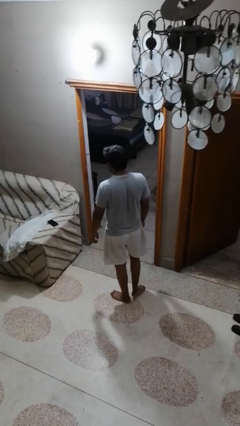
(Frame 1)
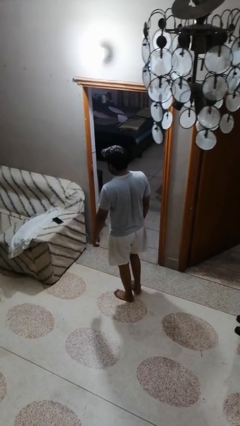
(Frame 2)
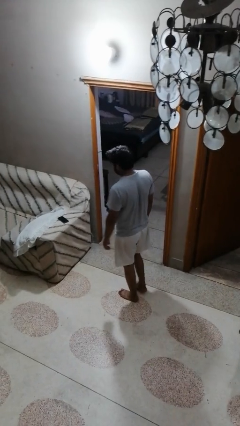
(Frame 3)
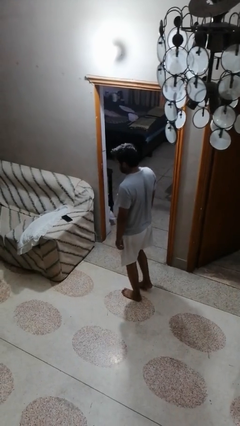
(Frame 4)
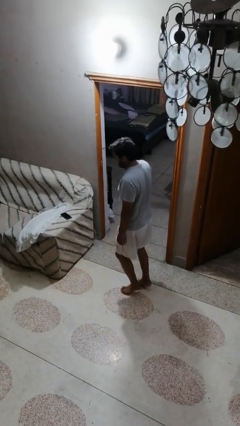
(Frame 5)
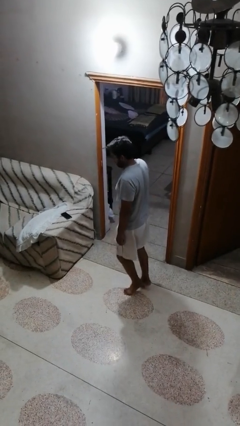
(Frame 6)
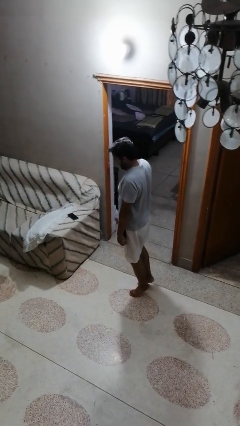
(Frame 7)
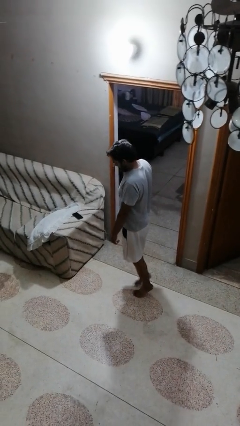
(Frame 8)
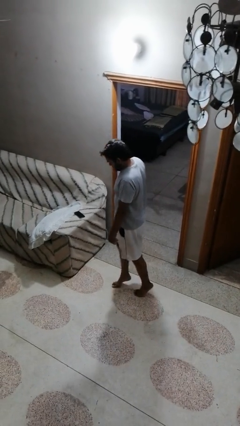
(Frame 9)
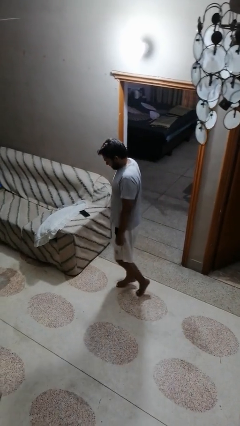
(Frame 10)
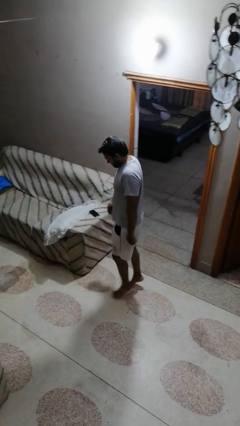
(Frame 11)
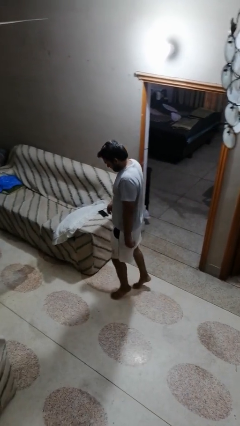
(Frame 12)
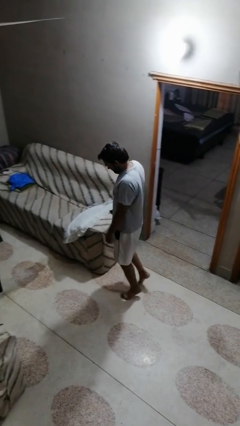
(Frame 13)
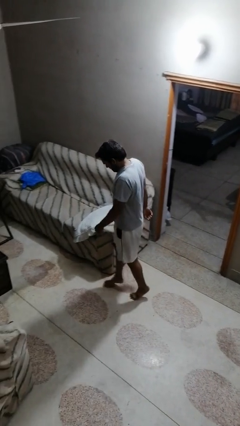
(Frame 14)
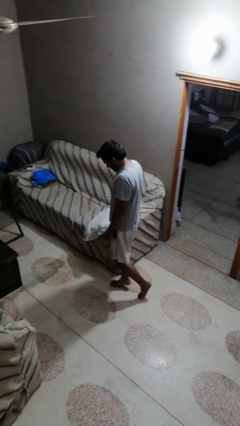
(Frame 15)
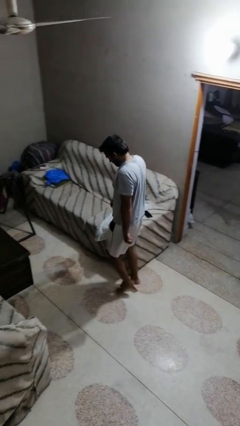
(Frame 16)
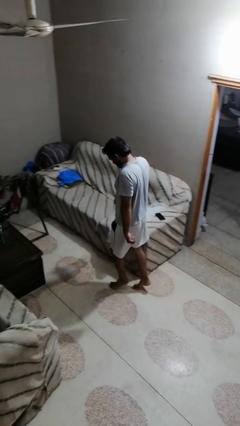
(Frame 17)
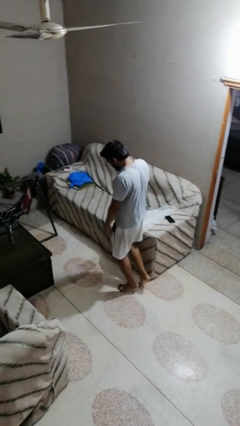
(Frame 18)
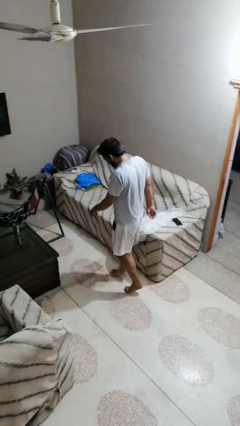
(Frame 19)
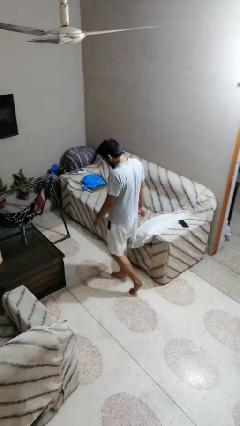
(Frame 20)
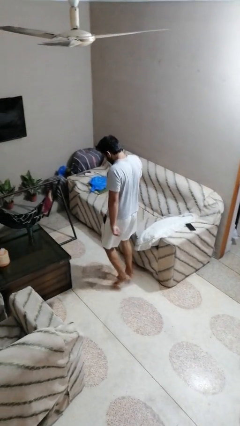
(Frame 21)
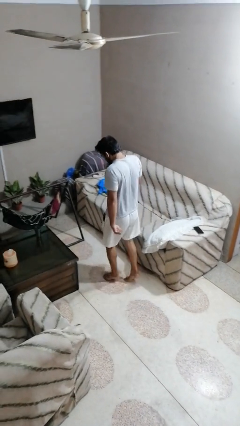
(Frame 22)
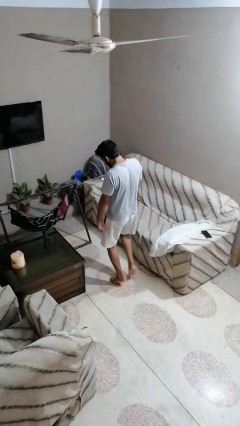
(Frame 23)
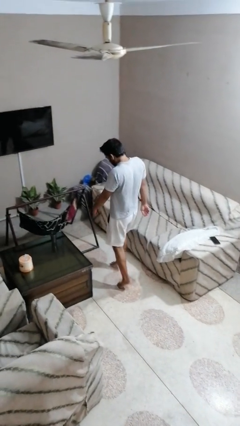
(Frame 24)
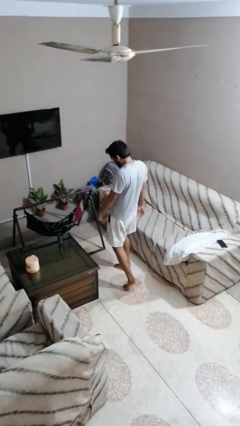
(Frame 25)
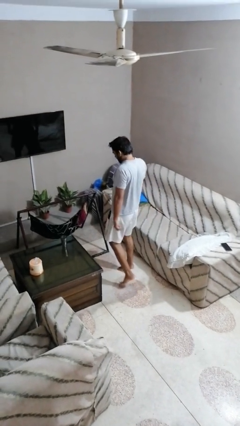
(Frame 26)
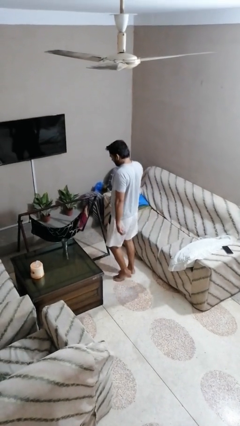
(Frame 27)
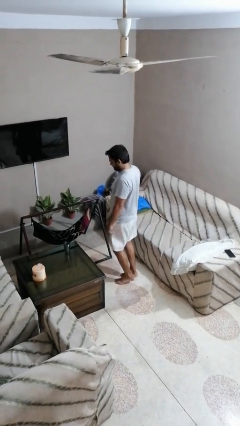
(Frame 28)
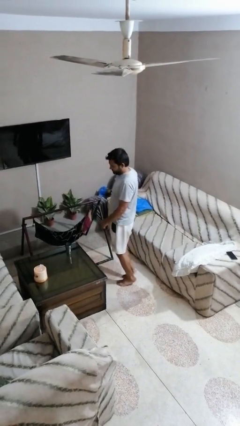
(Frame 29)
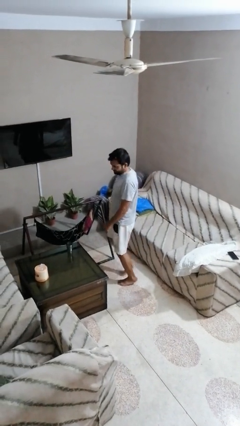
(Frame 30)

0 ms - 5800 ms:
person walks tiptoe

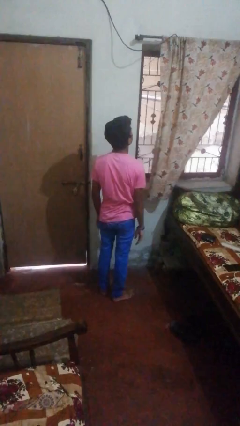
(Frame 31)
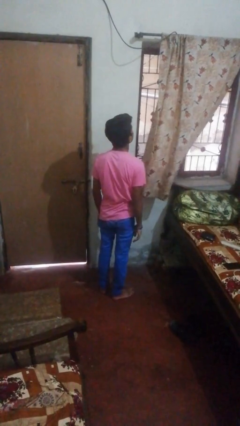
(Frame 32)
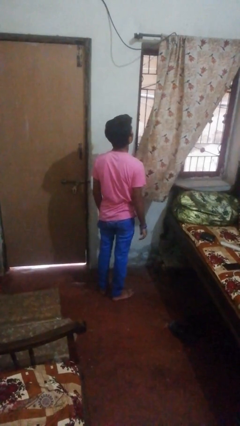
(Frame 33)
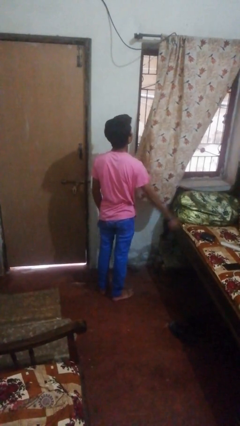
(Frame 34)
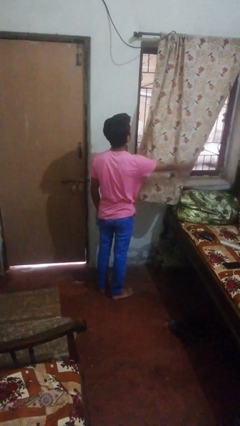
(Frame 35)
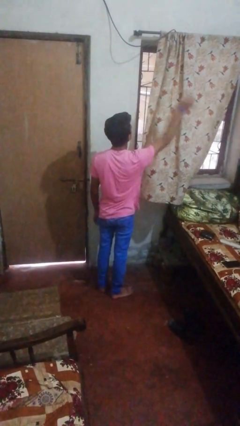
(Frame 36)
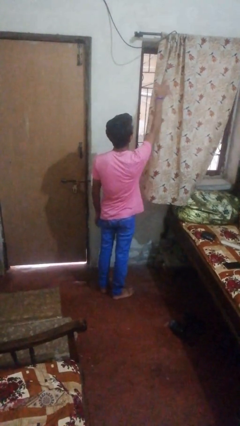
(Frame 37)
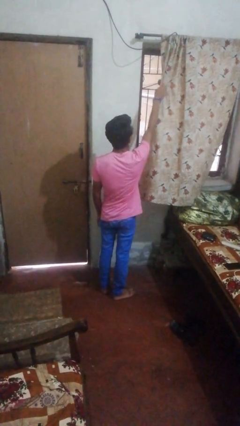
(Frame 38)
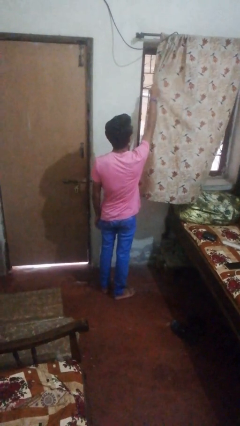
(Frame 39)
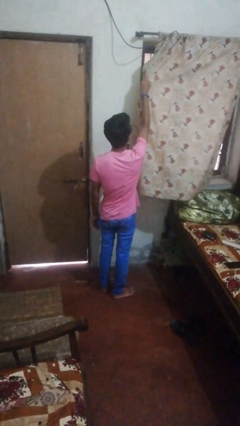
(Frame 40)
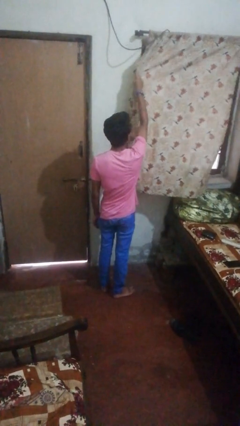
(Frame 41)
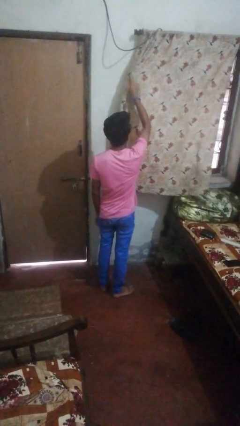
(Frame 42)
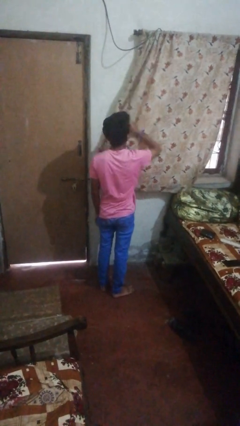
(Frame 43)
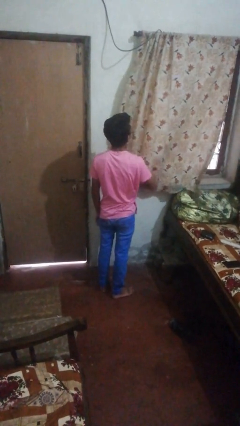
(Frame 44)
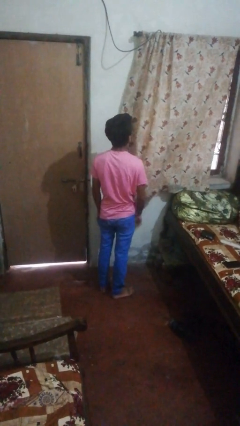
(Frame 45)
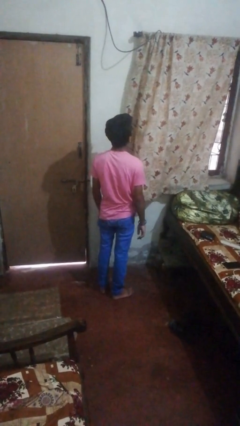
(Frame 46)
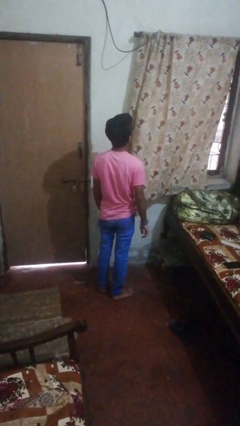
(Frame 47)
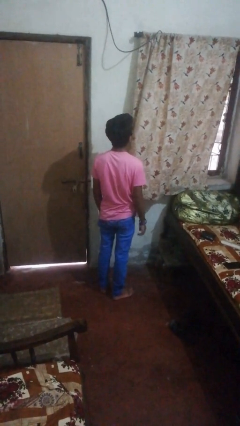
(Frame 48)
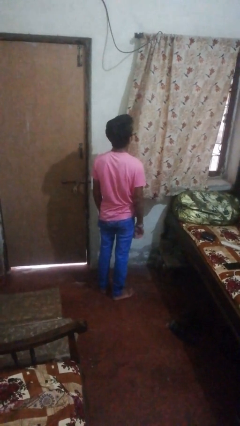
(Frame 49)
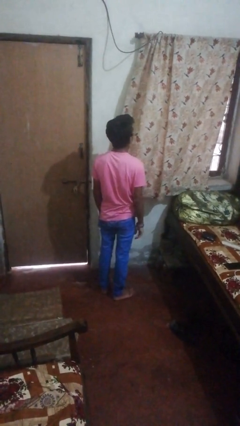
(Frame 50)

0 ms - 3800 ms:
person closes curtains

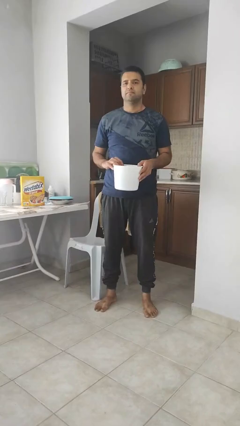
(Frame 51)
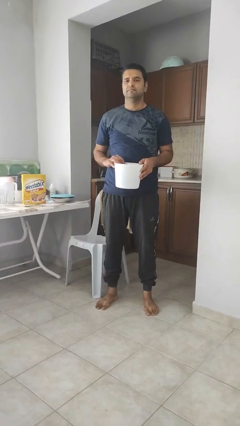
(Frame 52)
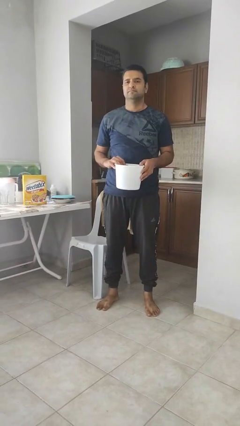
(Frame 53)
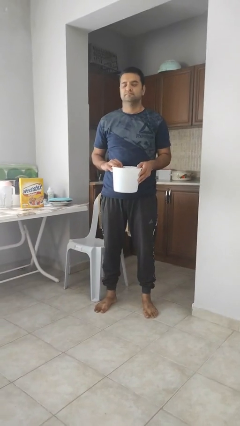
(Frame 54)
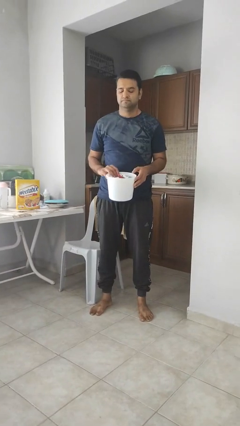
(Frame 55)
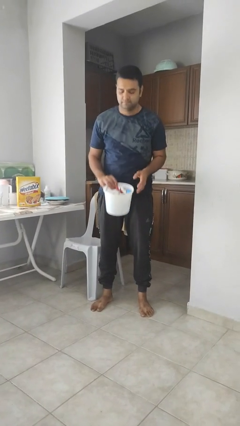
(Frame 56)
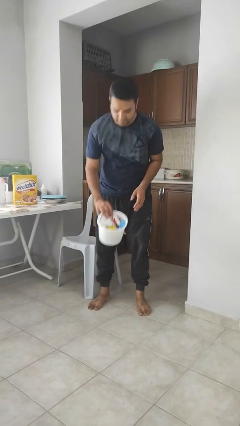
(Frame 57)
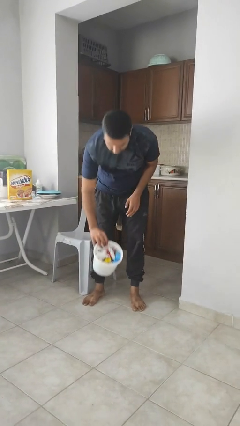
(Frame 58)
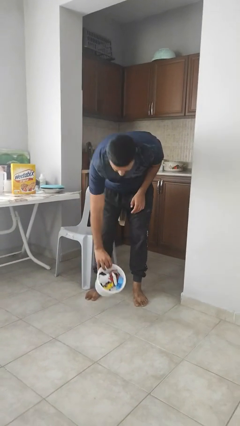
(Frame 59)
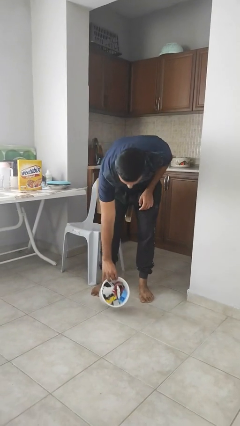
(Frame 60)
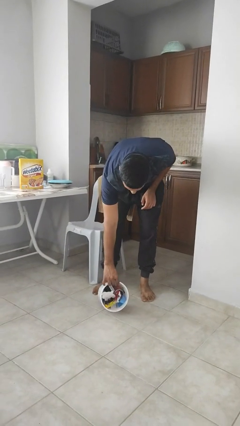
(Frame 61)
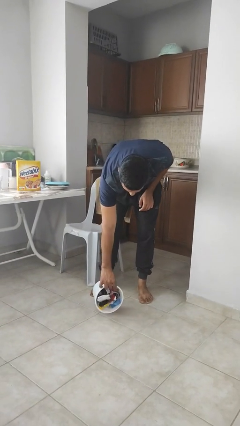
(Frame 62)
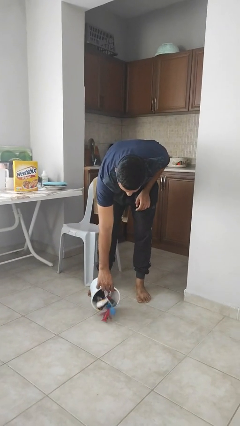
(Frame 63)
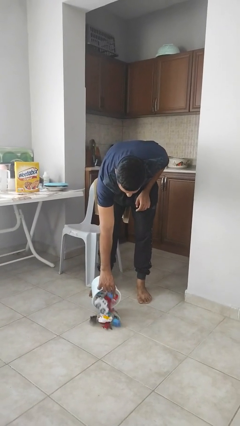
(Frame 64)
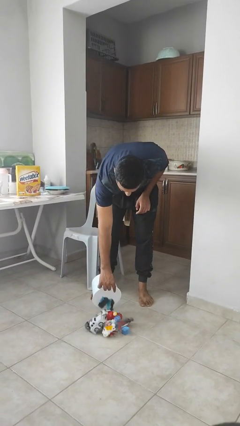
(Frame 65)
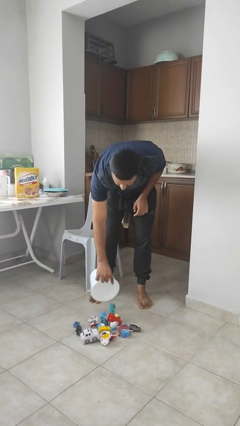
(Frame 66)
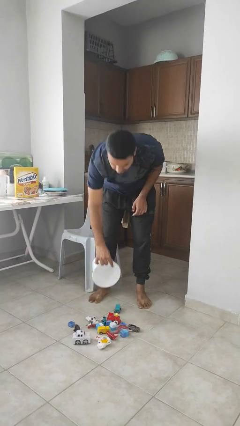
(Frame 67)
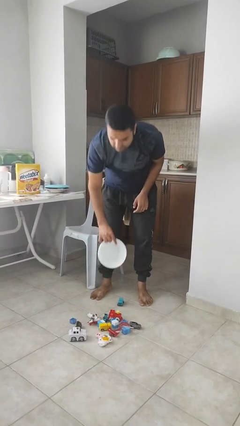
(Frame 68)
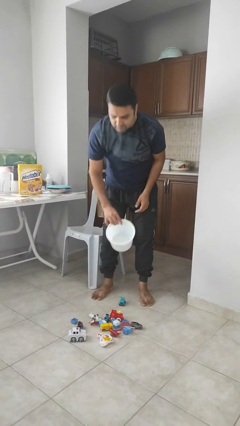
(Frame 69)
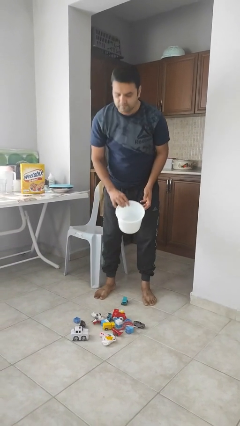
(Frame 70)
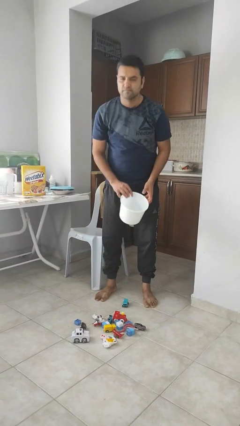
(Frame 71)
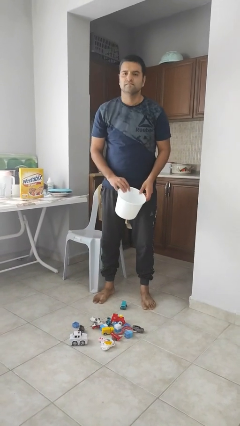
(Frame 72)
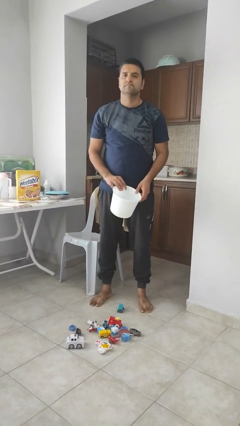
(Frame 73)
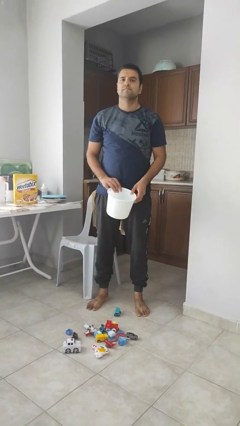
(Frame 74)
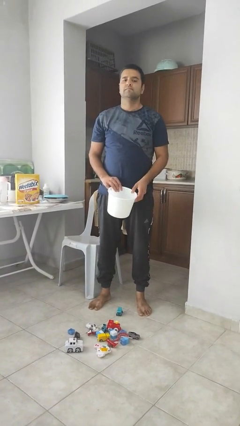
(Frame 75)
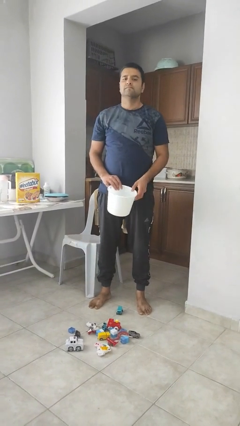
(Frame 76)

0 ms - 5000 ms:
person unloads box onto floor

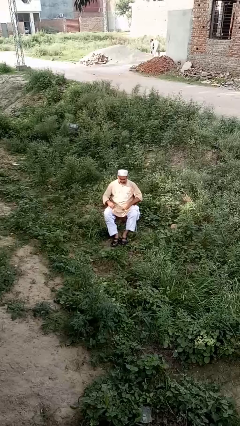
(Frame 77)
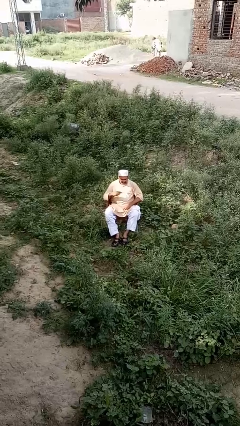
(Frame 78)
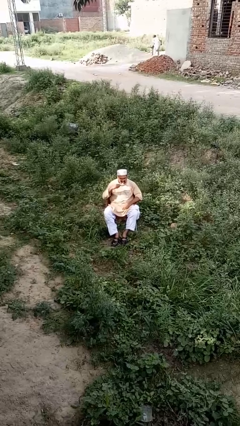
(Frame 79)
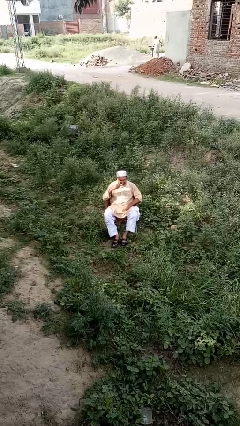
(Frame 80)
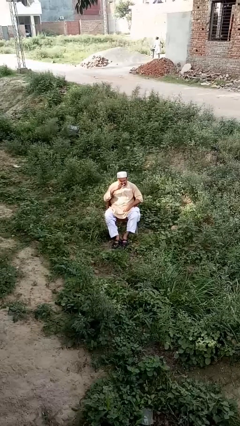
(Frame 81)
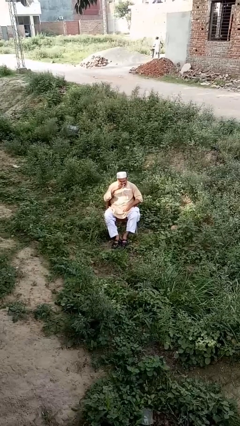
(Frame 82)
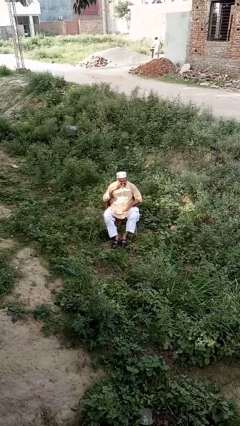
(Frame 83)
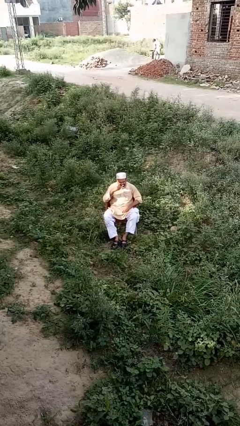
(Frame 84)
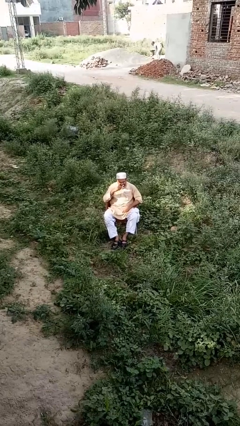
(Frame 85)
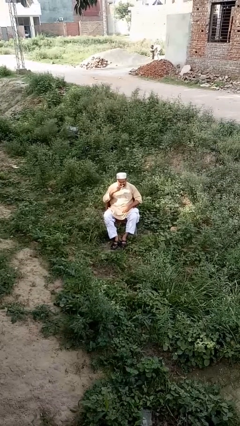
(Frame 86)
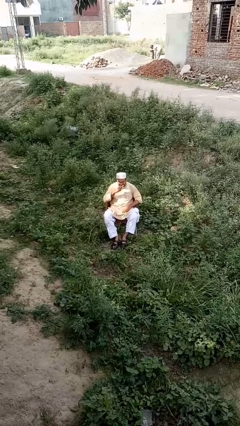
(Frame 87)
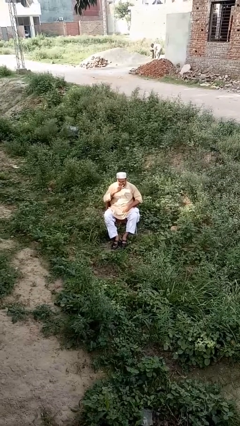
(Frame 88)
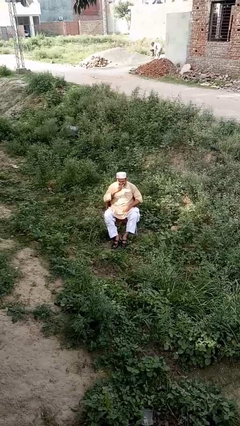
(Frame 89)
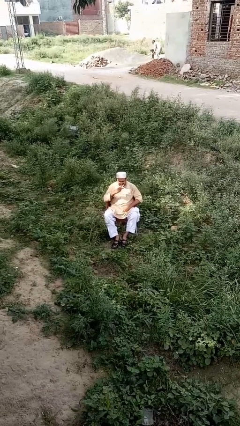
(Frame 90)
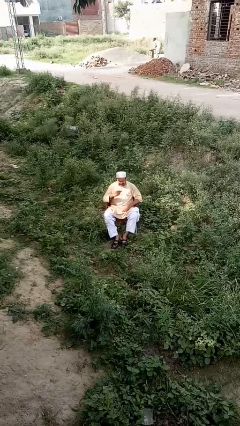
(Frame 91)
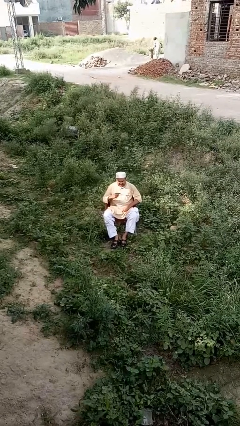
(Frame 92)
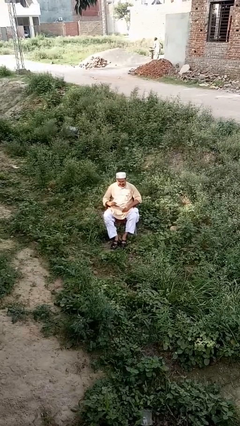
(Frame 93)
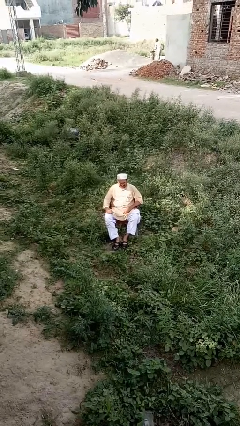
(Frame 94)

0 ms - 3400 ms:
person brushes teeth
